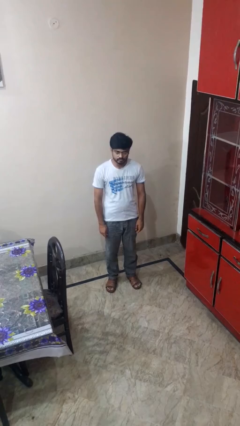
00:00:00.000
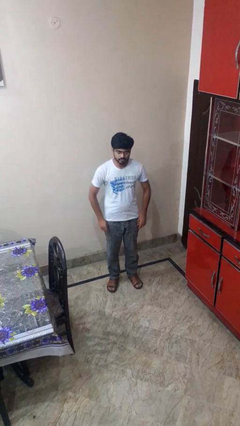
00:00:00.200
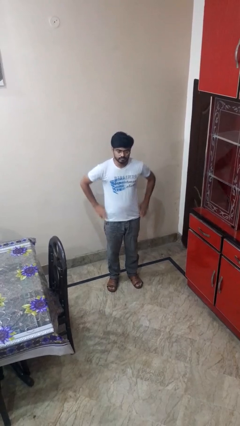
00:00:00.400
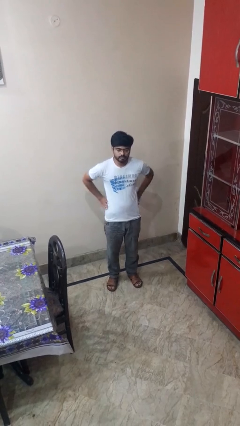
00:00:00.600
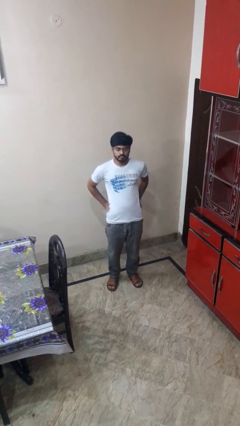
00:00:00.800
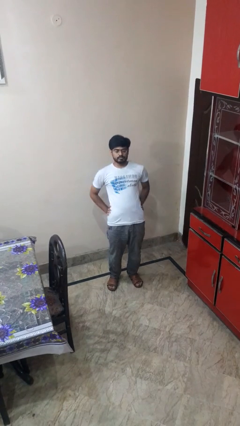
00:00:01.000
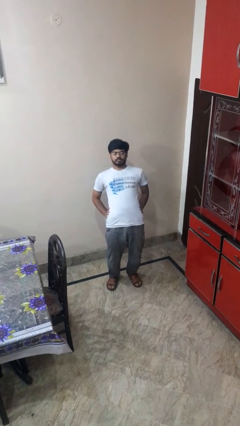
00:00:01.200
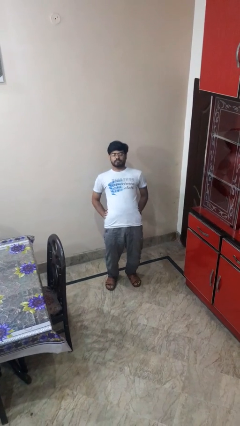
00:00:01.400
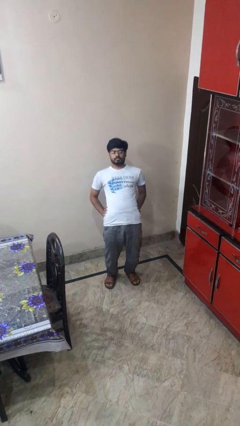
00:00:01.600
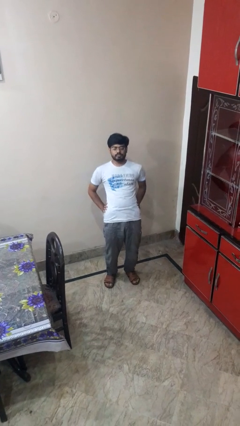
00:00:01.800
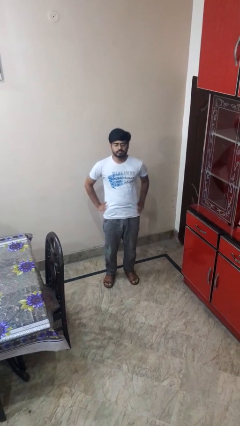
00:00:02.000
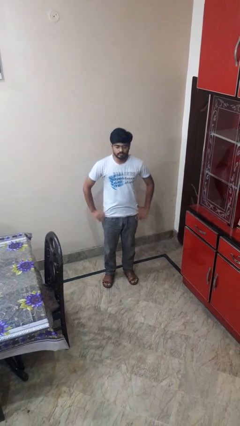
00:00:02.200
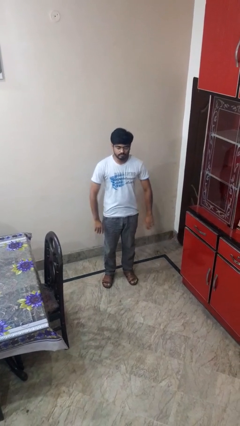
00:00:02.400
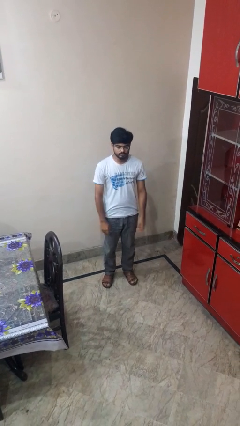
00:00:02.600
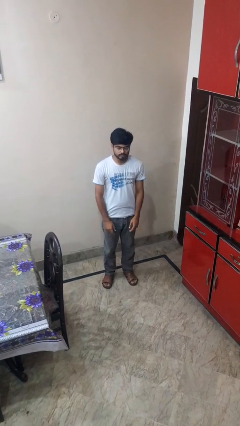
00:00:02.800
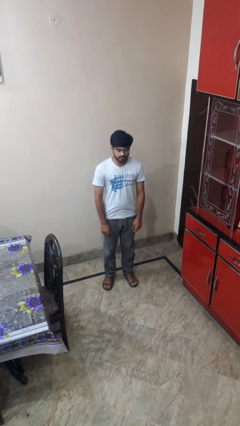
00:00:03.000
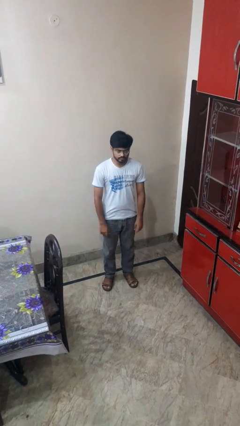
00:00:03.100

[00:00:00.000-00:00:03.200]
person stretches back

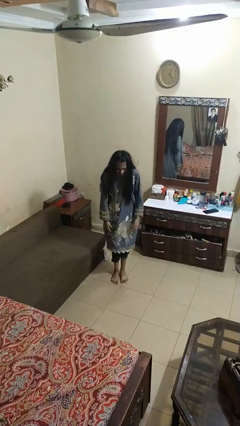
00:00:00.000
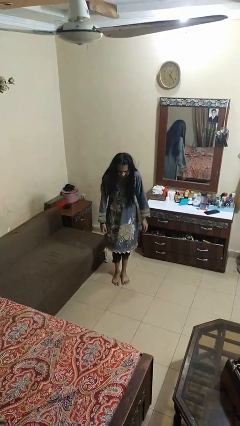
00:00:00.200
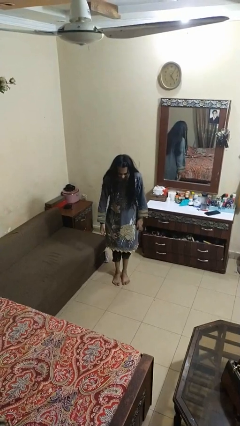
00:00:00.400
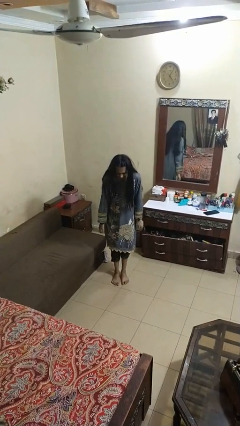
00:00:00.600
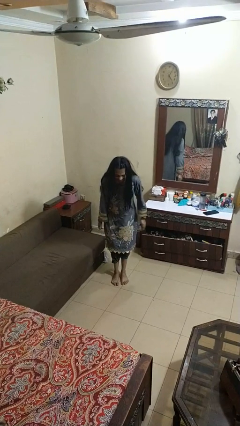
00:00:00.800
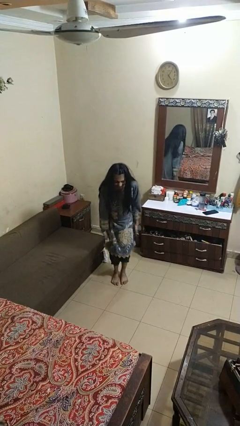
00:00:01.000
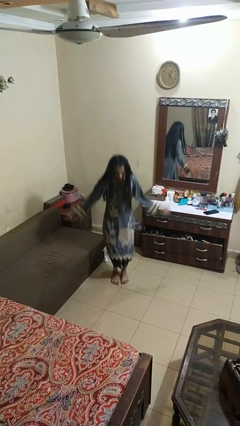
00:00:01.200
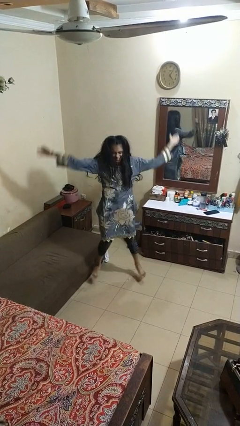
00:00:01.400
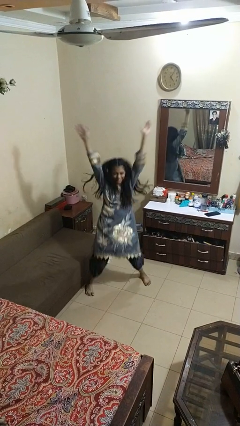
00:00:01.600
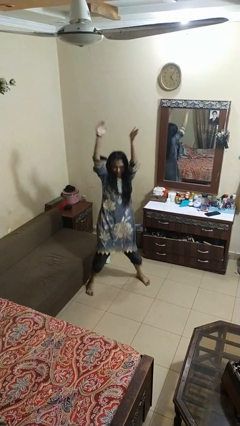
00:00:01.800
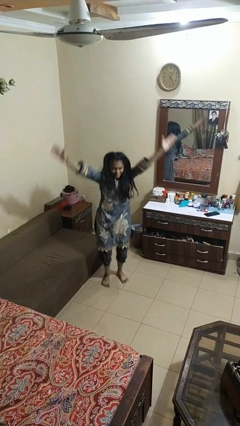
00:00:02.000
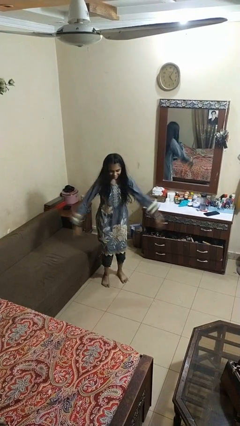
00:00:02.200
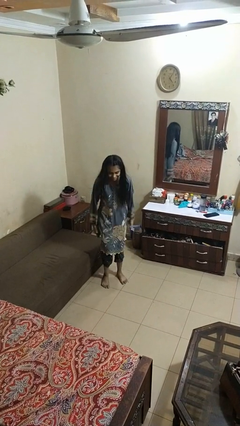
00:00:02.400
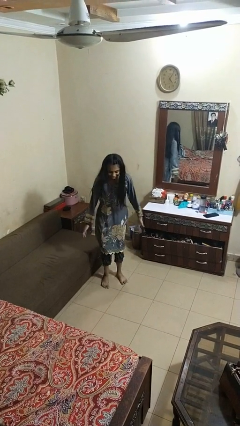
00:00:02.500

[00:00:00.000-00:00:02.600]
person exercises with jumping jacks

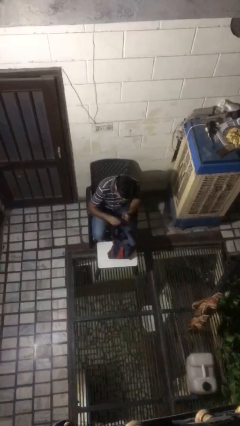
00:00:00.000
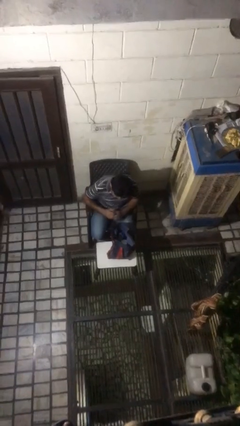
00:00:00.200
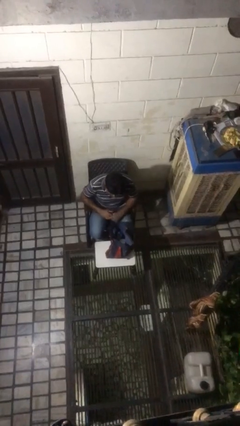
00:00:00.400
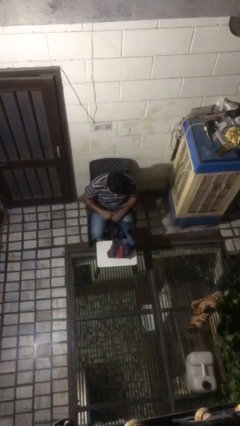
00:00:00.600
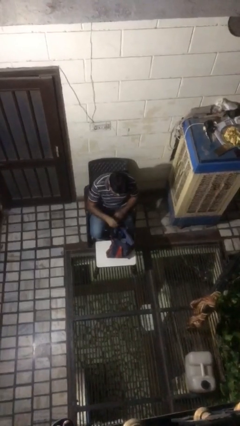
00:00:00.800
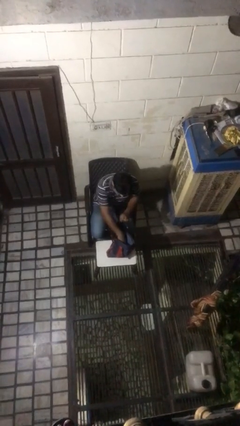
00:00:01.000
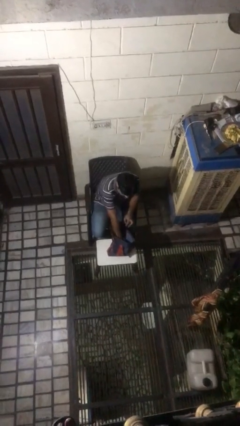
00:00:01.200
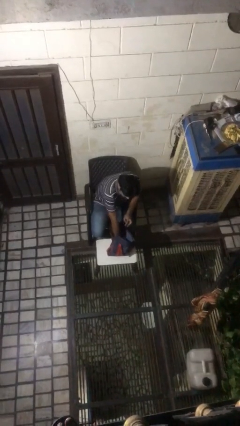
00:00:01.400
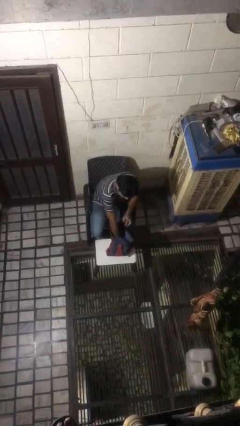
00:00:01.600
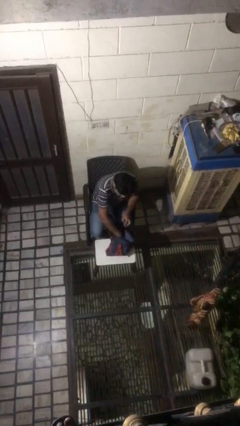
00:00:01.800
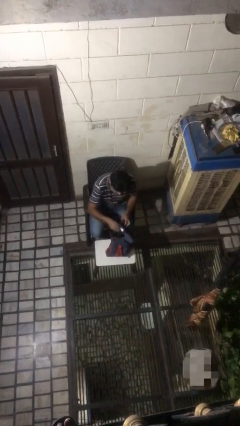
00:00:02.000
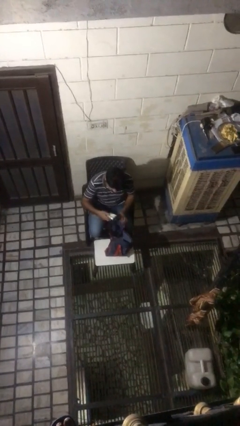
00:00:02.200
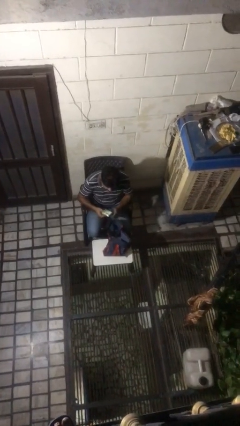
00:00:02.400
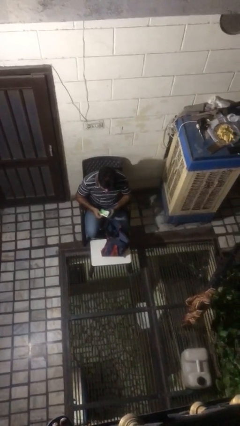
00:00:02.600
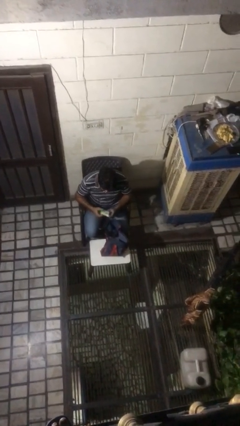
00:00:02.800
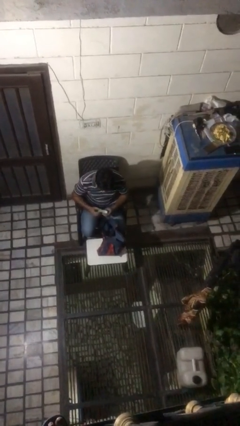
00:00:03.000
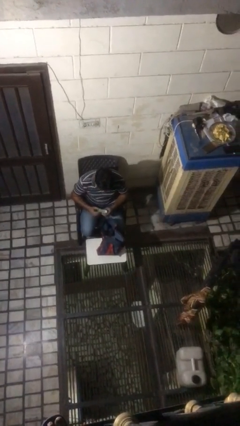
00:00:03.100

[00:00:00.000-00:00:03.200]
person takes object from bag

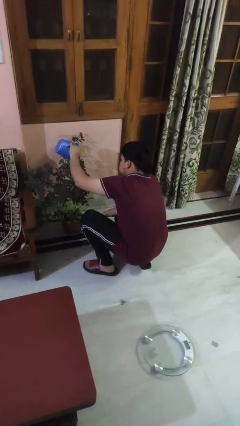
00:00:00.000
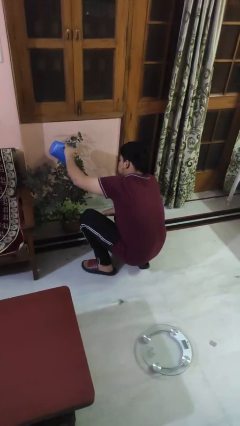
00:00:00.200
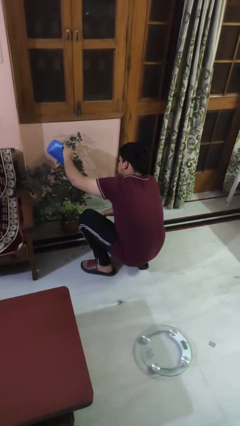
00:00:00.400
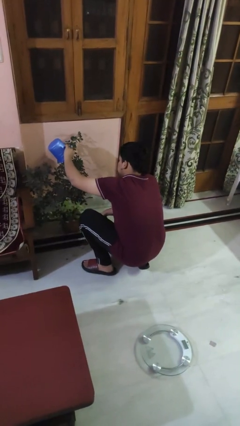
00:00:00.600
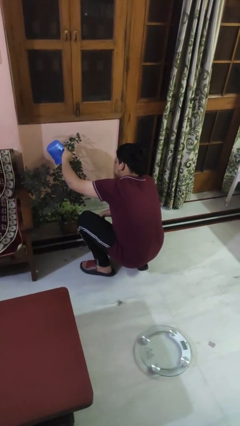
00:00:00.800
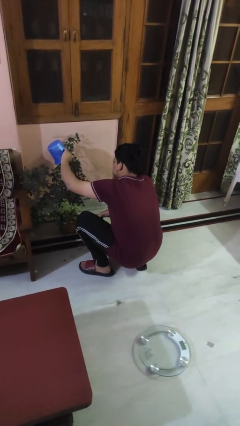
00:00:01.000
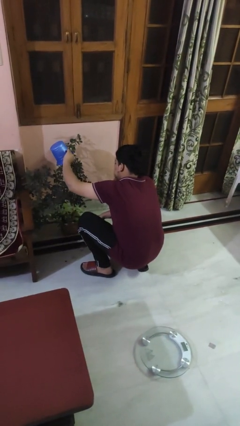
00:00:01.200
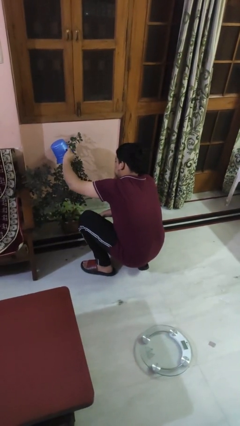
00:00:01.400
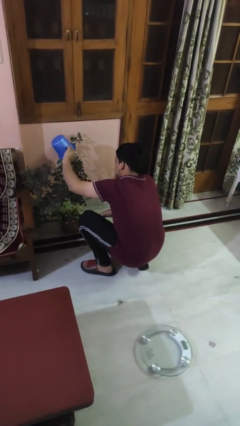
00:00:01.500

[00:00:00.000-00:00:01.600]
person waters houseplant

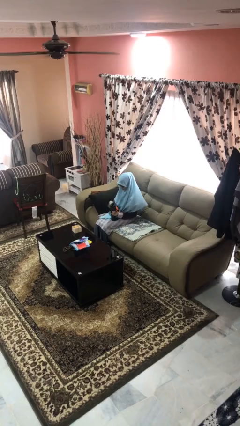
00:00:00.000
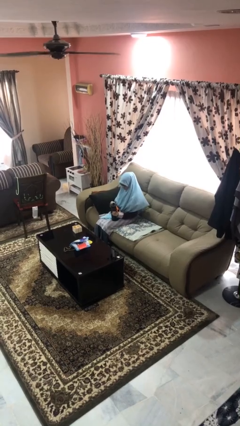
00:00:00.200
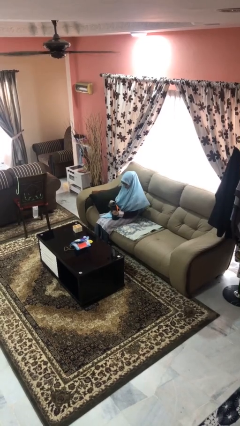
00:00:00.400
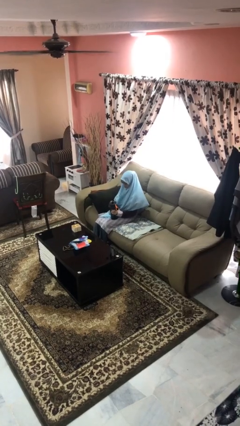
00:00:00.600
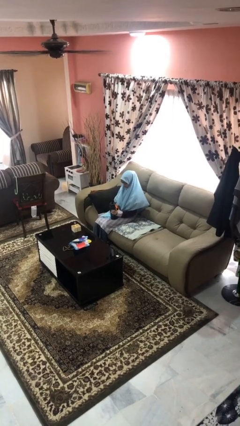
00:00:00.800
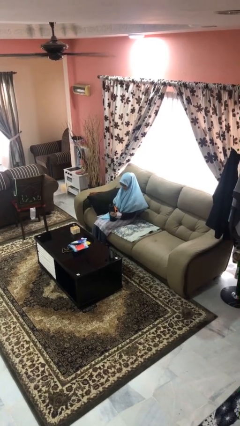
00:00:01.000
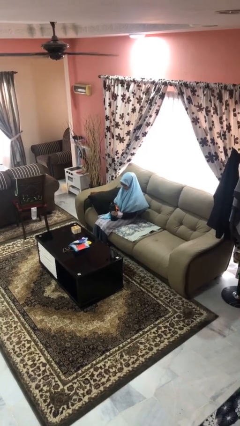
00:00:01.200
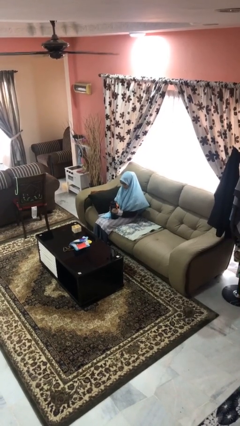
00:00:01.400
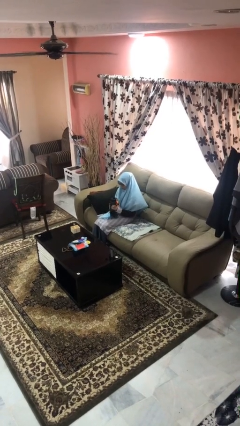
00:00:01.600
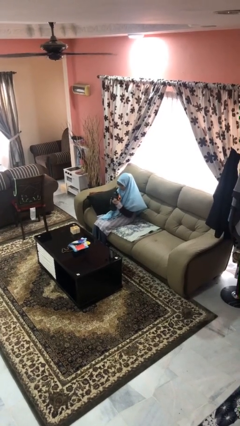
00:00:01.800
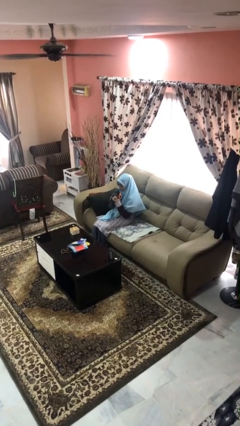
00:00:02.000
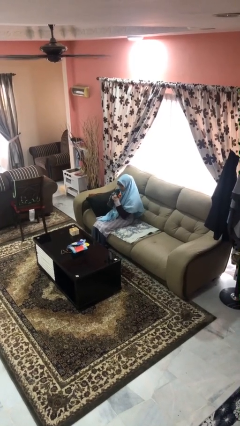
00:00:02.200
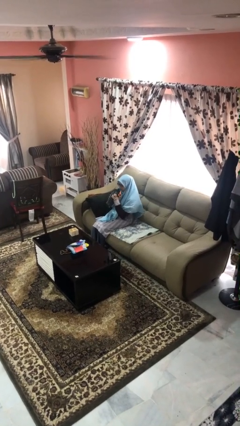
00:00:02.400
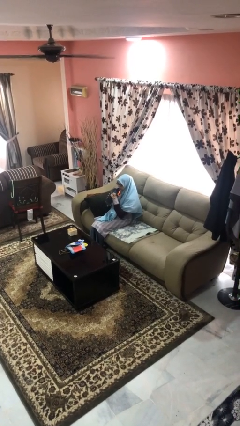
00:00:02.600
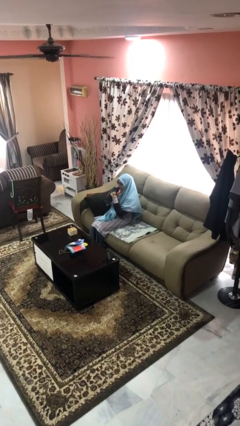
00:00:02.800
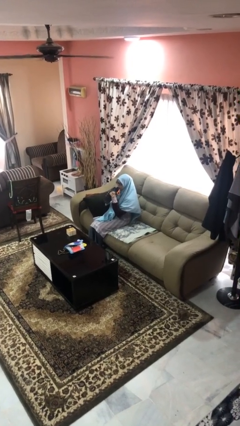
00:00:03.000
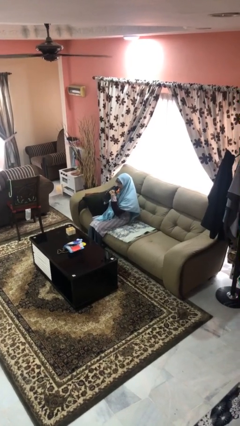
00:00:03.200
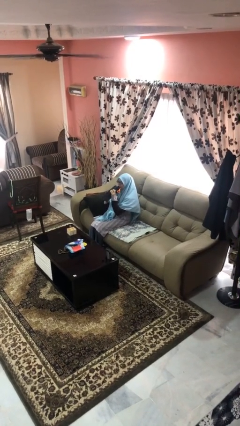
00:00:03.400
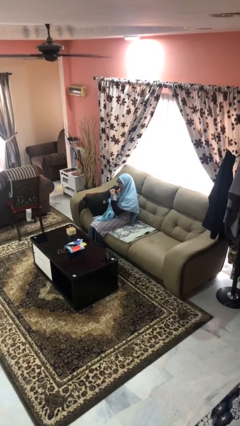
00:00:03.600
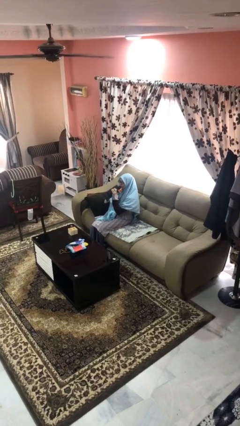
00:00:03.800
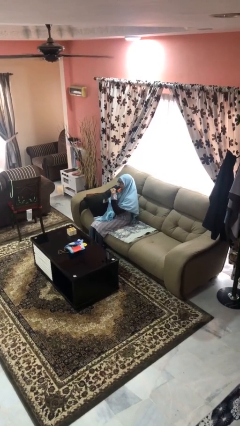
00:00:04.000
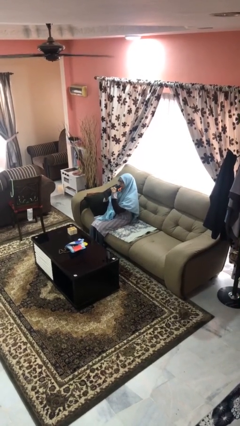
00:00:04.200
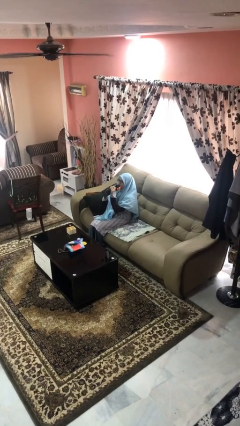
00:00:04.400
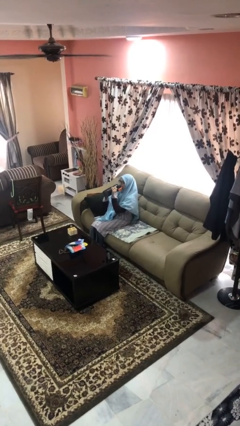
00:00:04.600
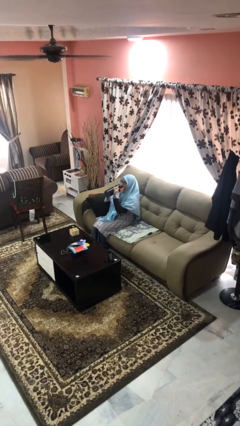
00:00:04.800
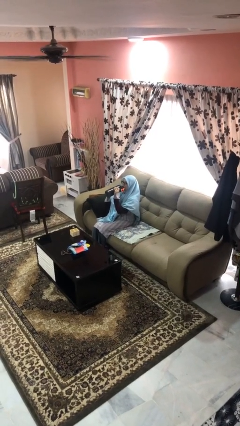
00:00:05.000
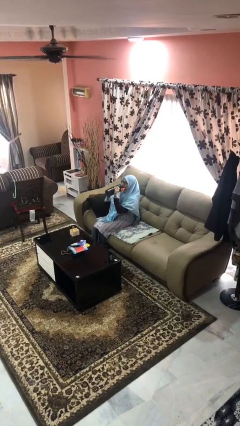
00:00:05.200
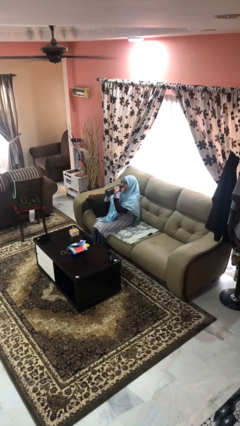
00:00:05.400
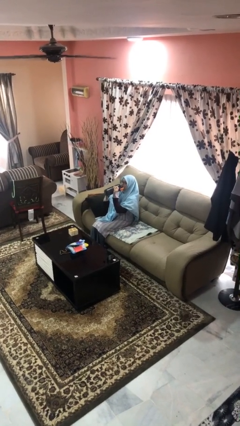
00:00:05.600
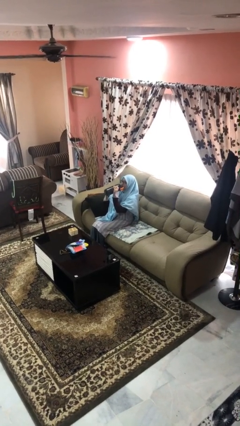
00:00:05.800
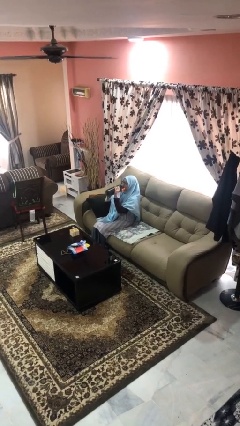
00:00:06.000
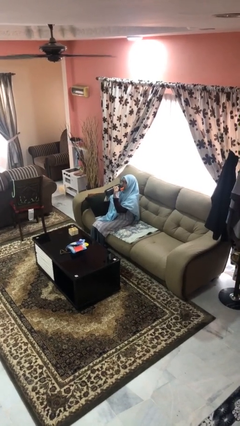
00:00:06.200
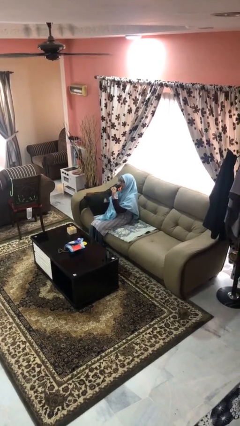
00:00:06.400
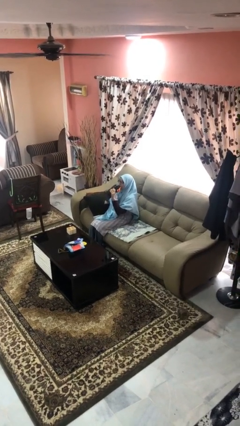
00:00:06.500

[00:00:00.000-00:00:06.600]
person drinks from bottle

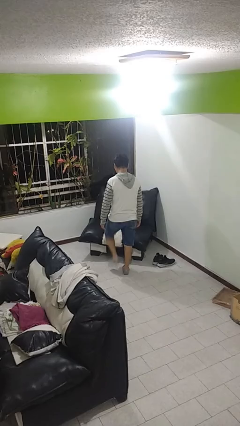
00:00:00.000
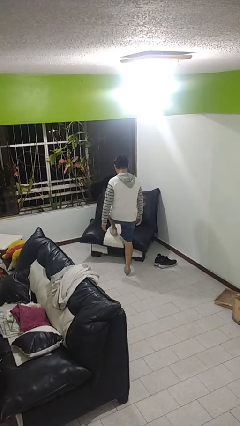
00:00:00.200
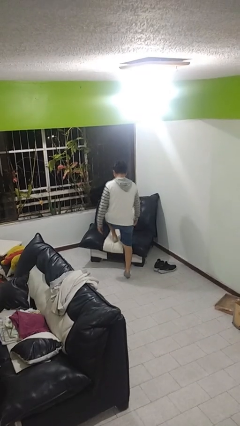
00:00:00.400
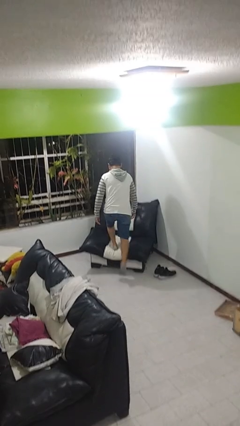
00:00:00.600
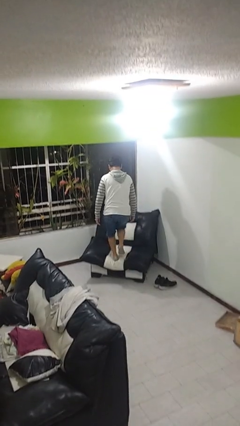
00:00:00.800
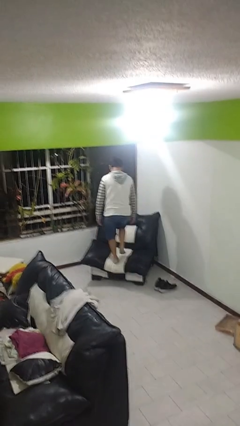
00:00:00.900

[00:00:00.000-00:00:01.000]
person climbs on couch
